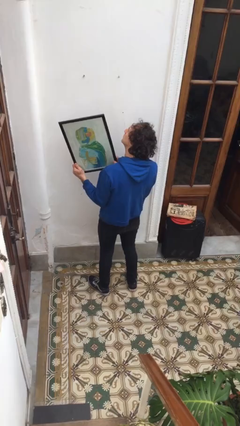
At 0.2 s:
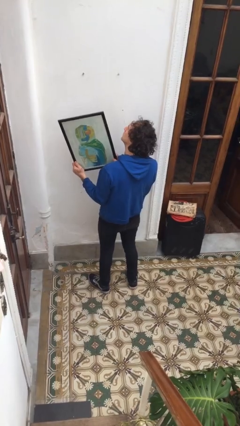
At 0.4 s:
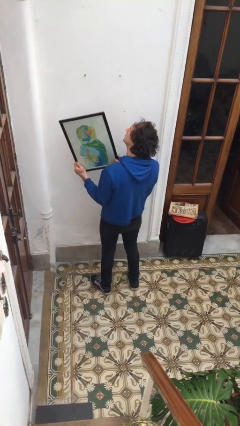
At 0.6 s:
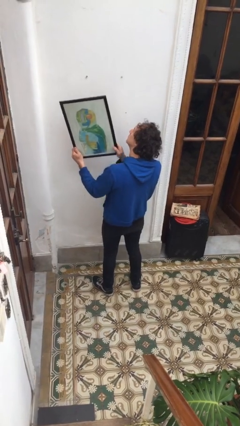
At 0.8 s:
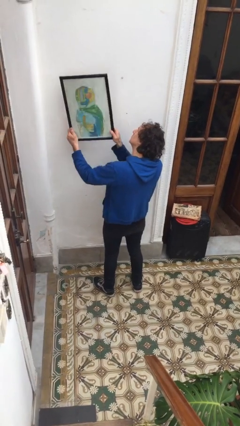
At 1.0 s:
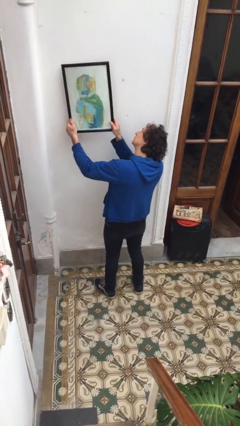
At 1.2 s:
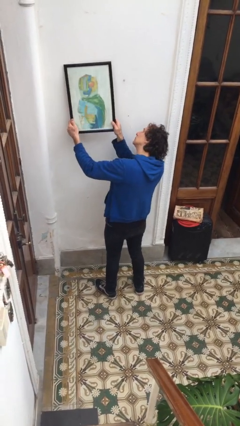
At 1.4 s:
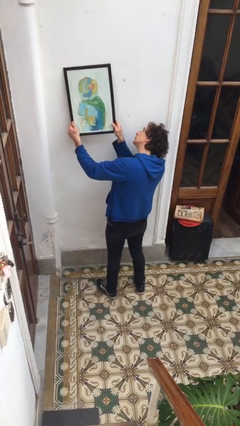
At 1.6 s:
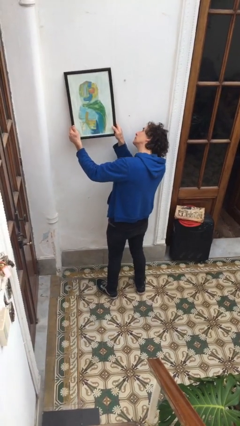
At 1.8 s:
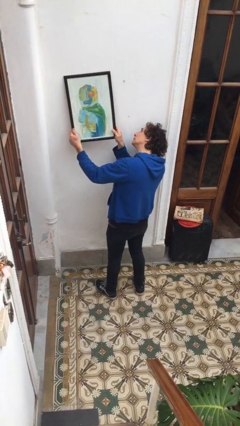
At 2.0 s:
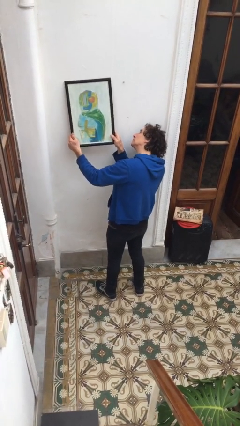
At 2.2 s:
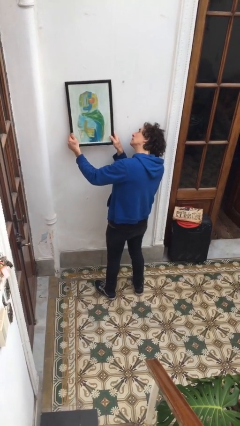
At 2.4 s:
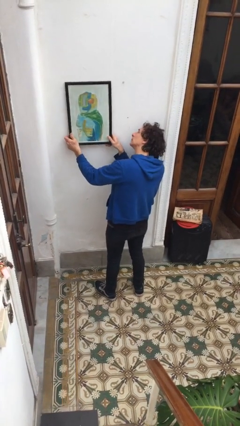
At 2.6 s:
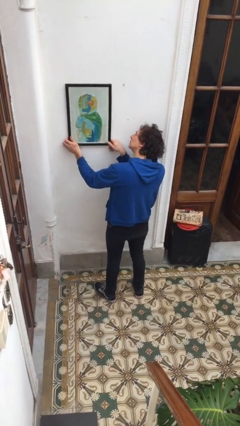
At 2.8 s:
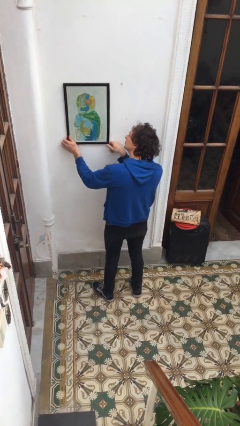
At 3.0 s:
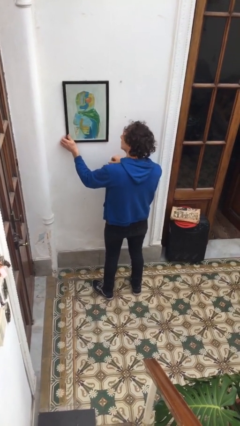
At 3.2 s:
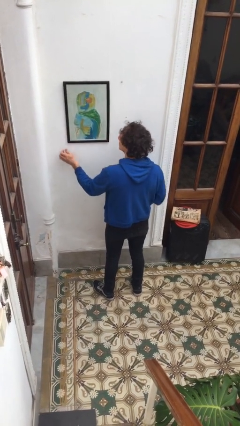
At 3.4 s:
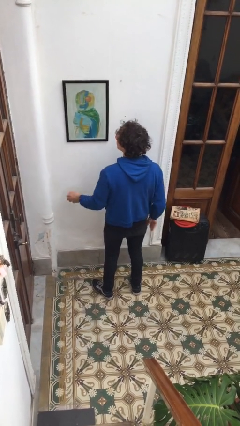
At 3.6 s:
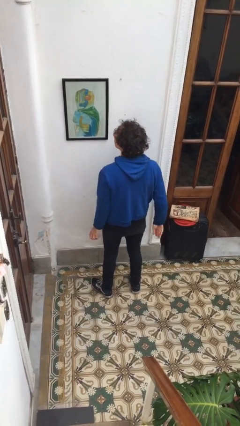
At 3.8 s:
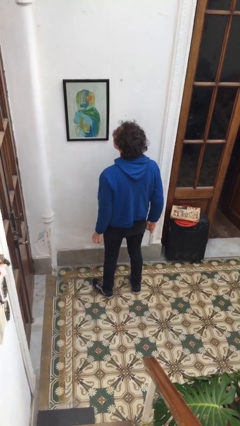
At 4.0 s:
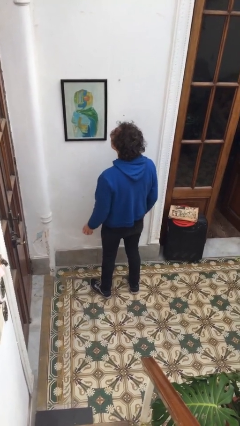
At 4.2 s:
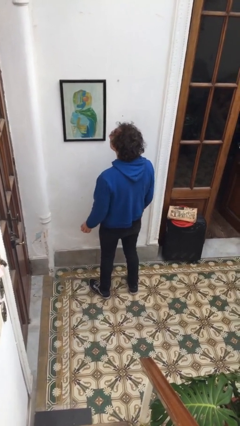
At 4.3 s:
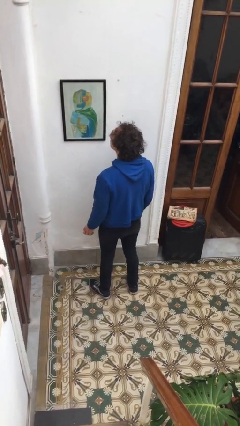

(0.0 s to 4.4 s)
person puts up picture frame

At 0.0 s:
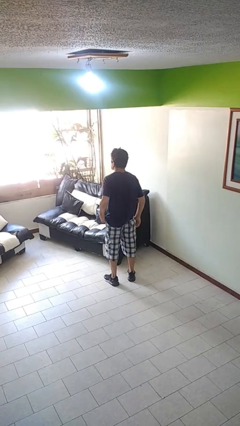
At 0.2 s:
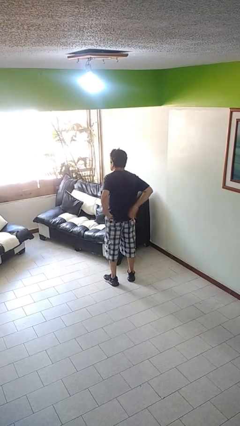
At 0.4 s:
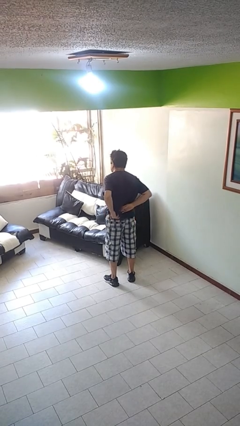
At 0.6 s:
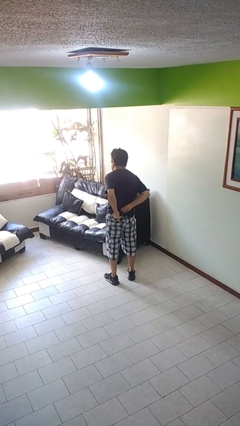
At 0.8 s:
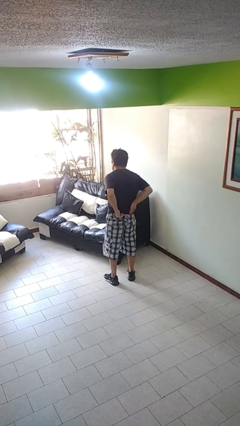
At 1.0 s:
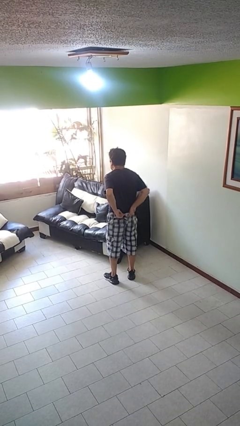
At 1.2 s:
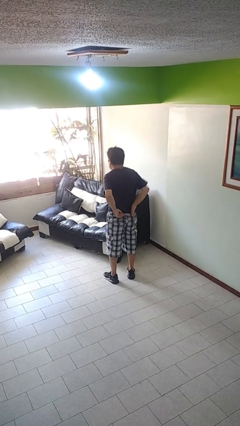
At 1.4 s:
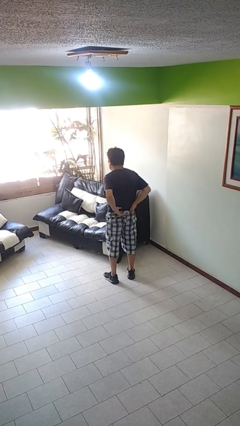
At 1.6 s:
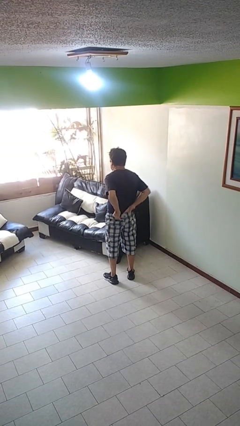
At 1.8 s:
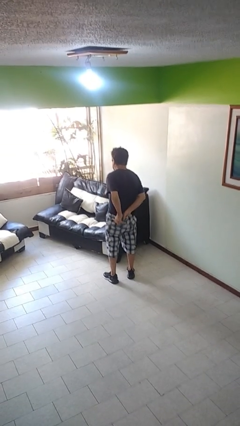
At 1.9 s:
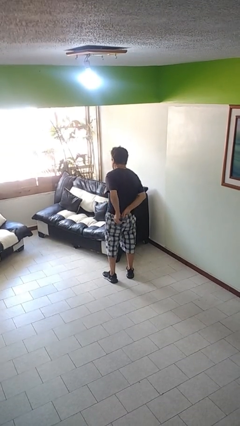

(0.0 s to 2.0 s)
person tucks in shirt

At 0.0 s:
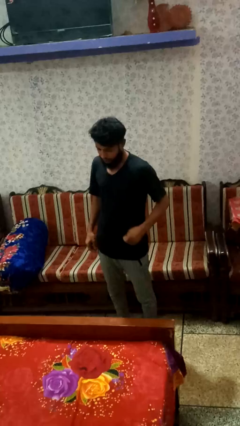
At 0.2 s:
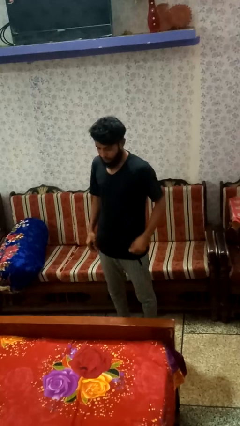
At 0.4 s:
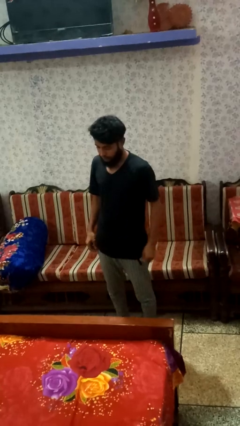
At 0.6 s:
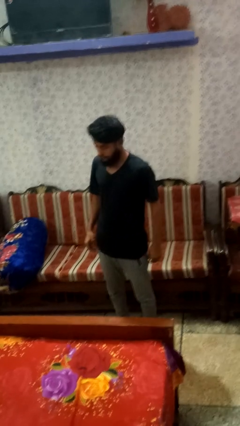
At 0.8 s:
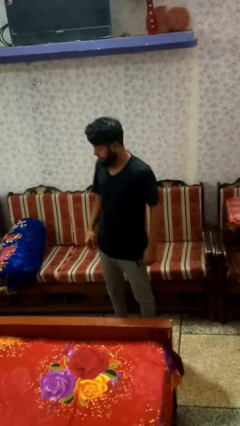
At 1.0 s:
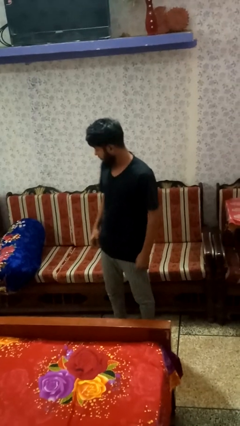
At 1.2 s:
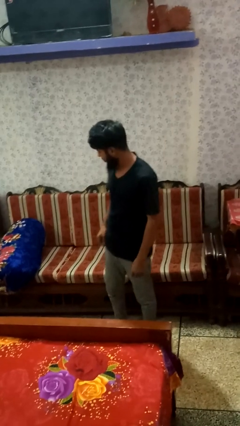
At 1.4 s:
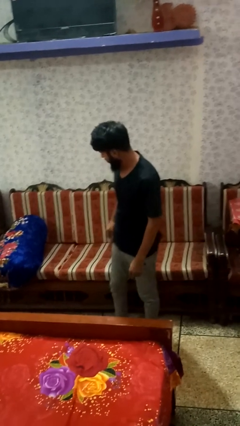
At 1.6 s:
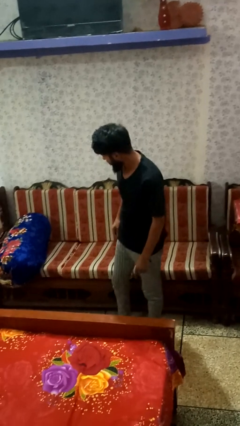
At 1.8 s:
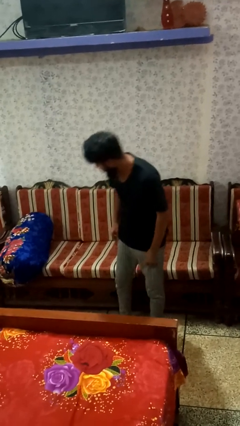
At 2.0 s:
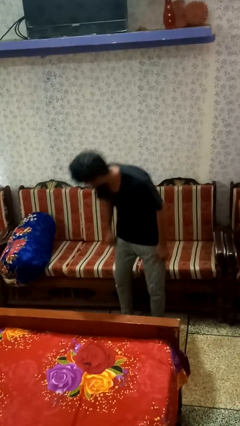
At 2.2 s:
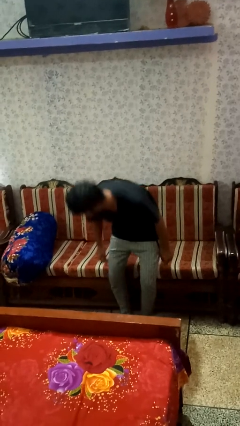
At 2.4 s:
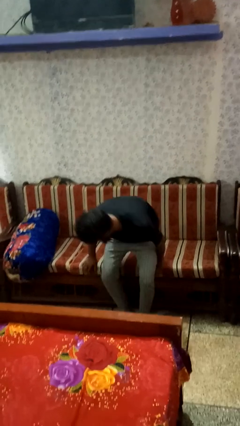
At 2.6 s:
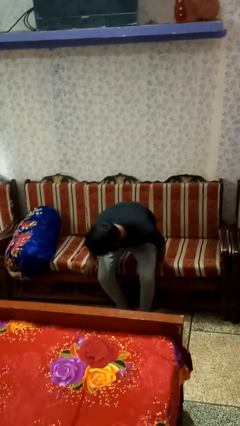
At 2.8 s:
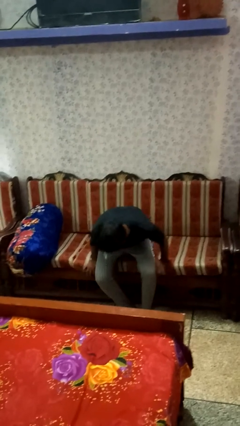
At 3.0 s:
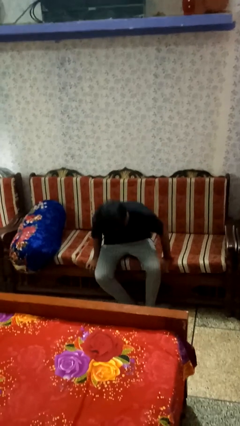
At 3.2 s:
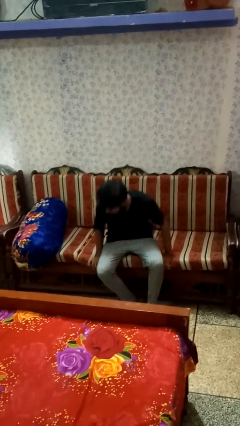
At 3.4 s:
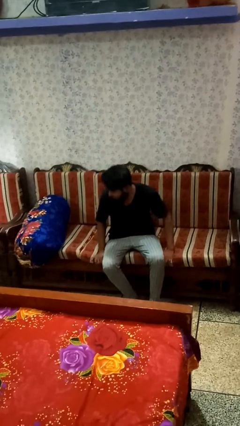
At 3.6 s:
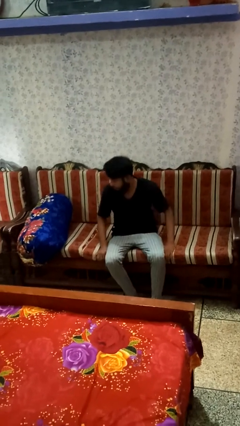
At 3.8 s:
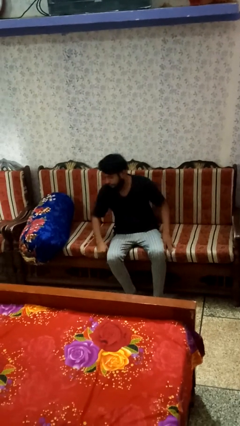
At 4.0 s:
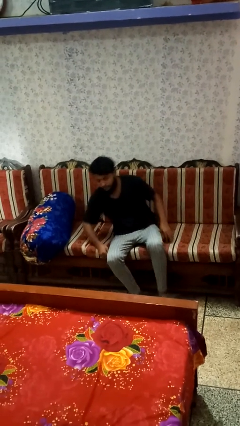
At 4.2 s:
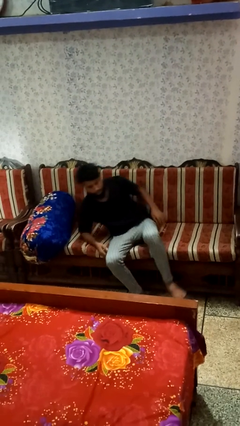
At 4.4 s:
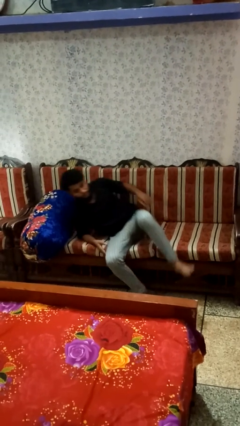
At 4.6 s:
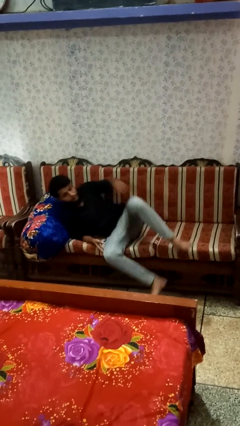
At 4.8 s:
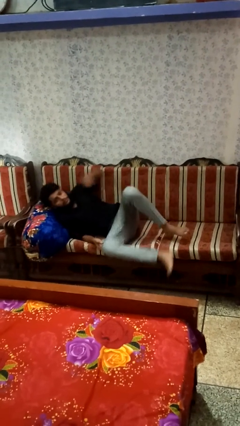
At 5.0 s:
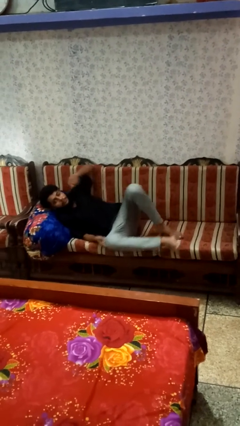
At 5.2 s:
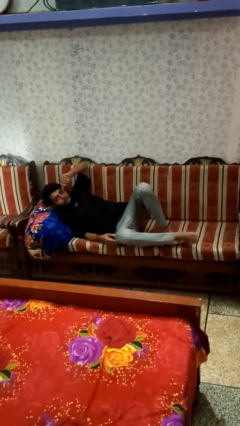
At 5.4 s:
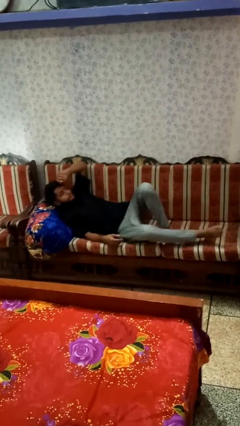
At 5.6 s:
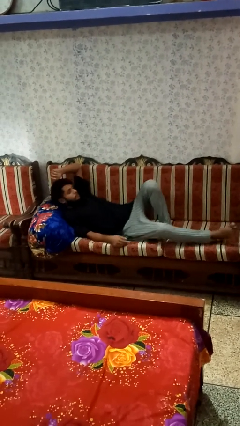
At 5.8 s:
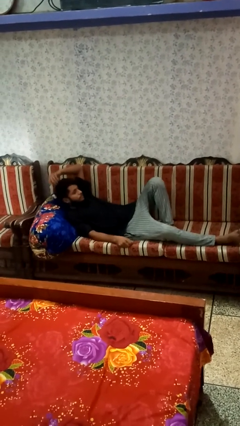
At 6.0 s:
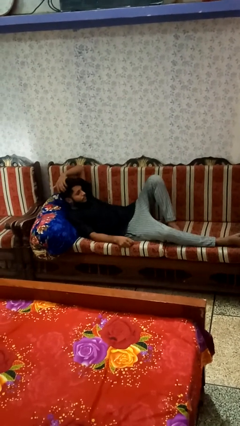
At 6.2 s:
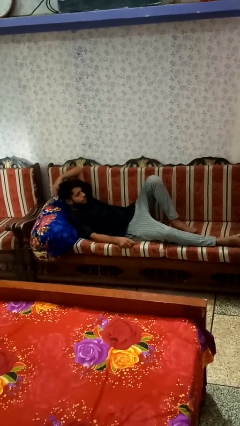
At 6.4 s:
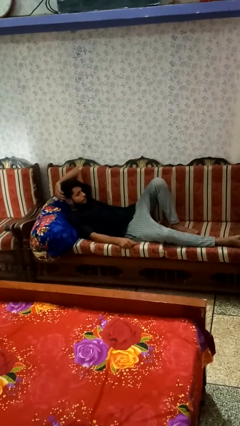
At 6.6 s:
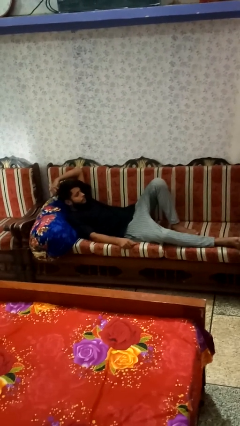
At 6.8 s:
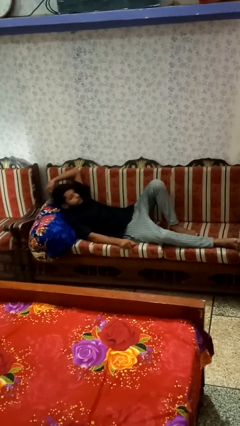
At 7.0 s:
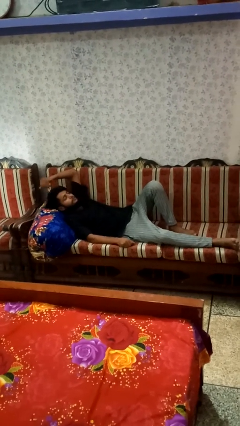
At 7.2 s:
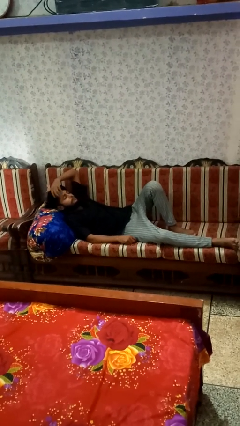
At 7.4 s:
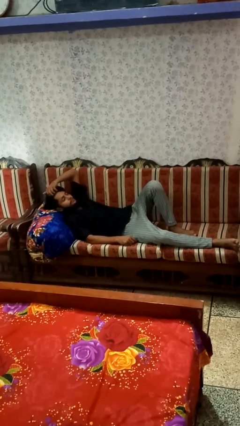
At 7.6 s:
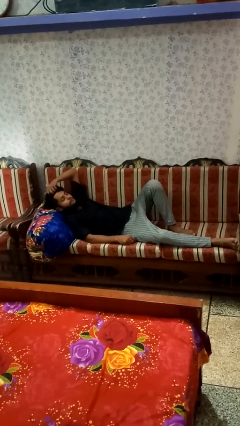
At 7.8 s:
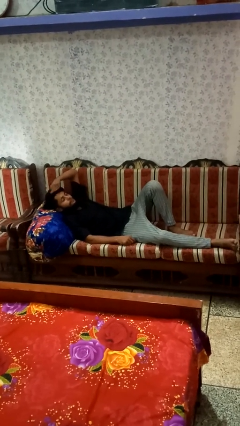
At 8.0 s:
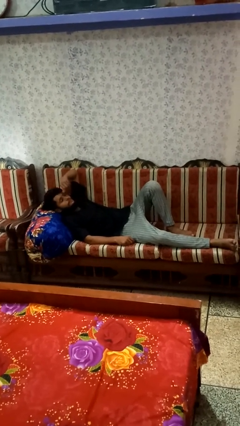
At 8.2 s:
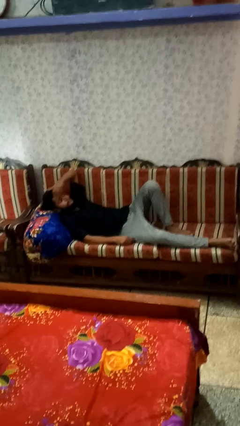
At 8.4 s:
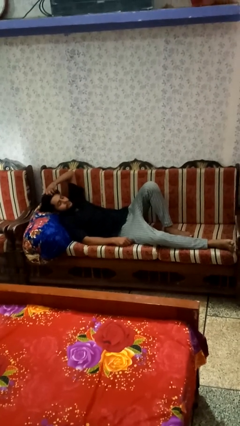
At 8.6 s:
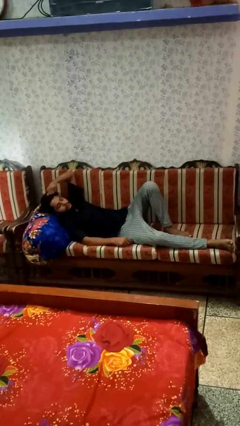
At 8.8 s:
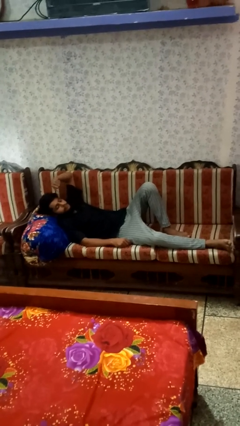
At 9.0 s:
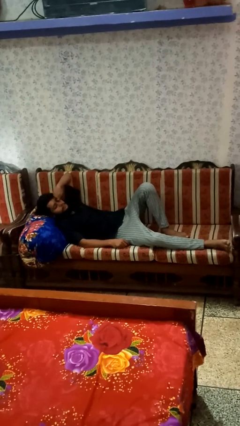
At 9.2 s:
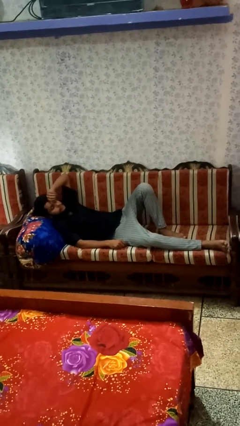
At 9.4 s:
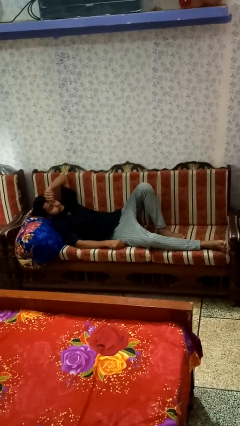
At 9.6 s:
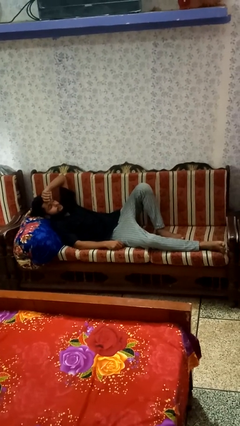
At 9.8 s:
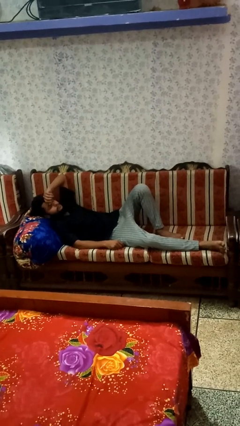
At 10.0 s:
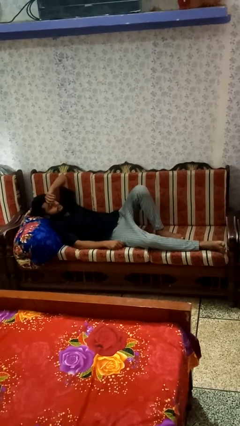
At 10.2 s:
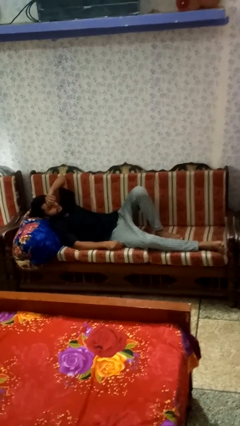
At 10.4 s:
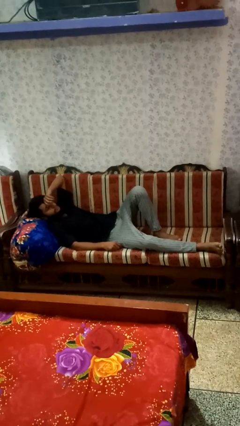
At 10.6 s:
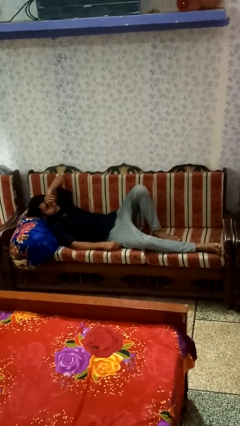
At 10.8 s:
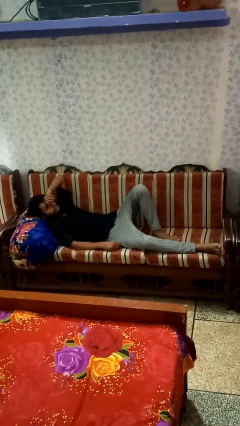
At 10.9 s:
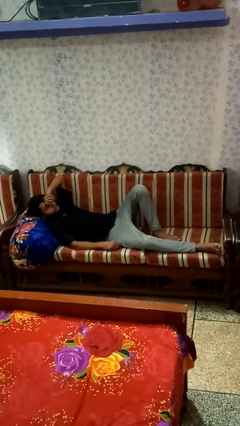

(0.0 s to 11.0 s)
person lies down on couch

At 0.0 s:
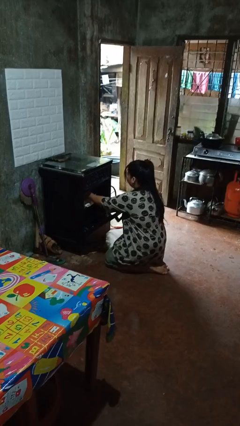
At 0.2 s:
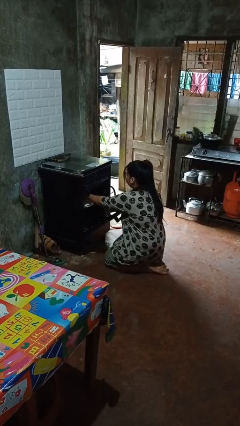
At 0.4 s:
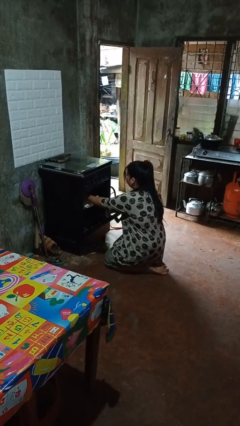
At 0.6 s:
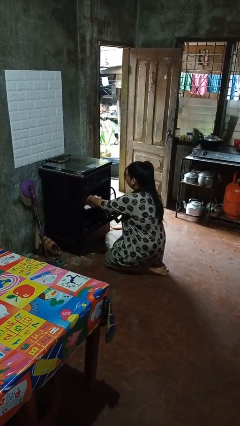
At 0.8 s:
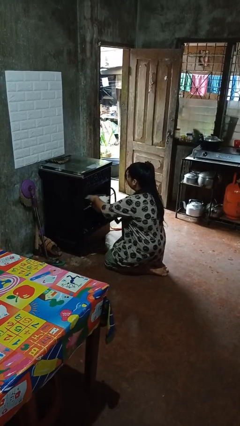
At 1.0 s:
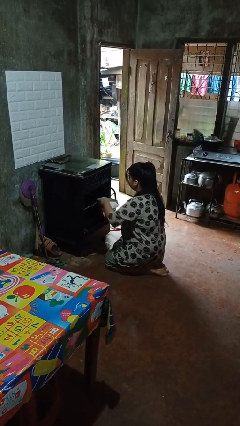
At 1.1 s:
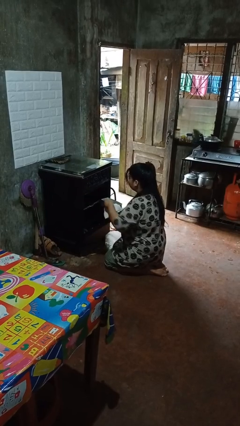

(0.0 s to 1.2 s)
person takes object from oven
